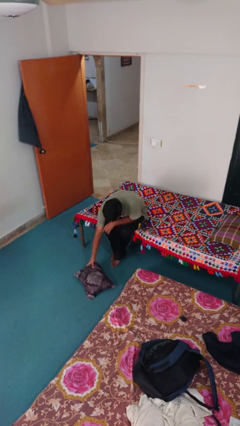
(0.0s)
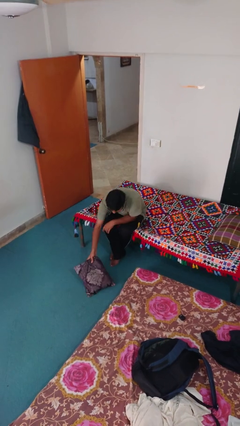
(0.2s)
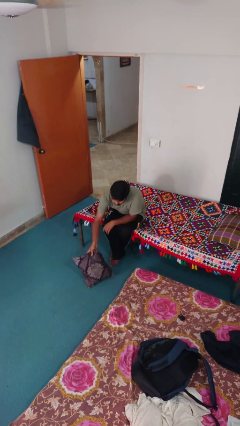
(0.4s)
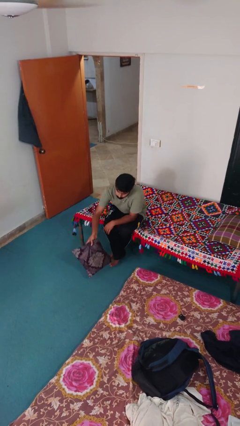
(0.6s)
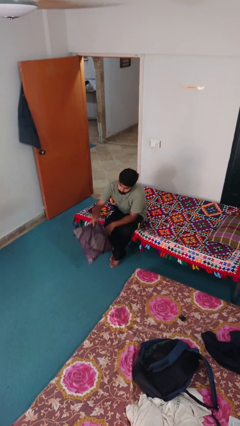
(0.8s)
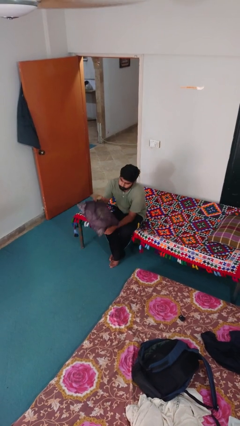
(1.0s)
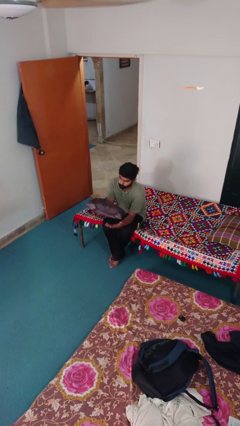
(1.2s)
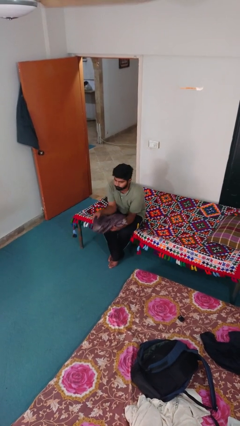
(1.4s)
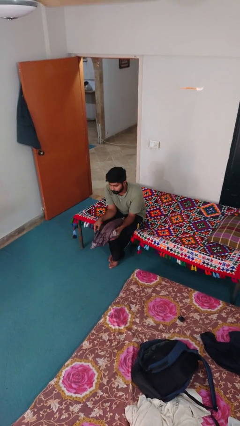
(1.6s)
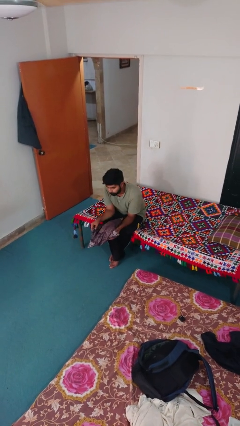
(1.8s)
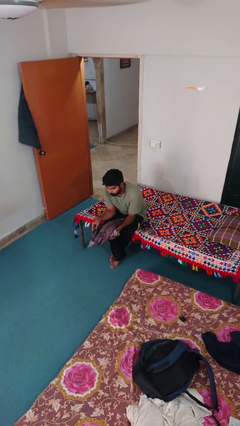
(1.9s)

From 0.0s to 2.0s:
person picks up object from floor

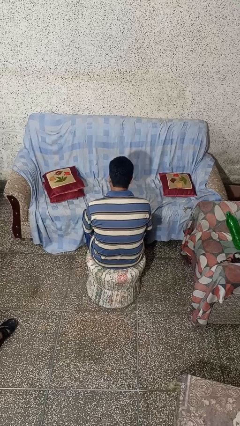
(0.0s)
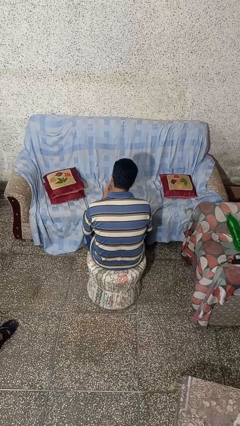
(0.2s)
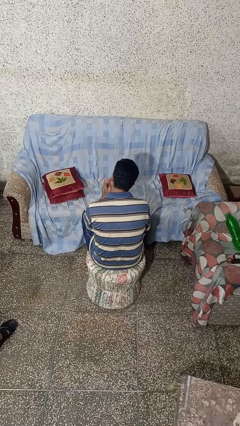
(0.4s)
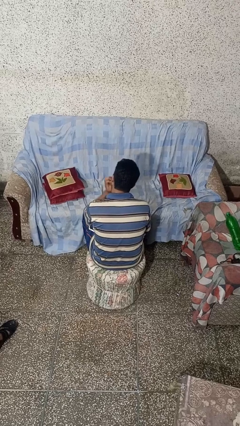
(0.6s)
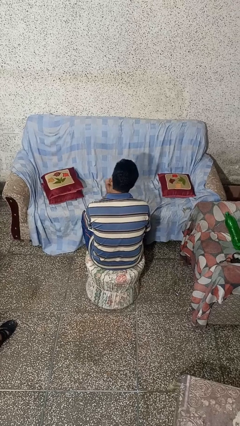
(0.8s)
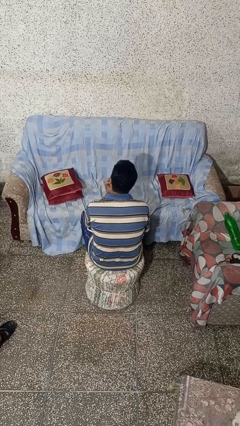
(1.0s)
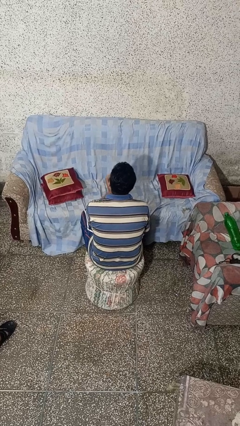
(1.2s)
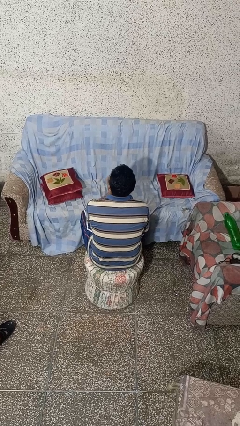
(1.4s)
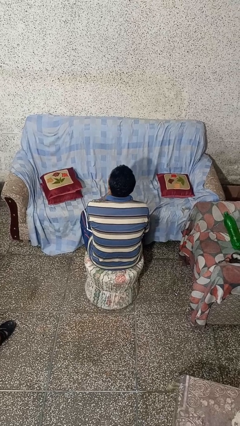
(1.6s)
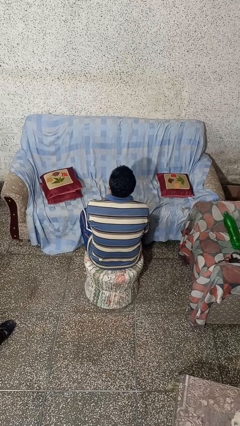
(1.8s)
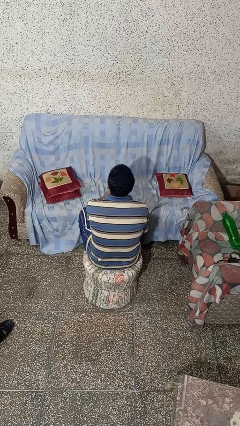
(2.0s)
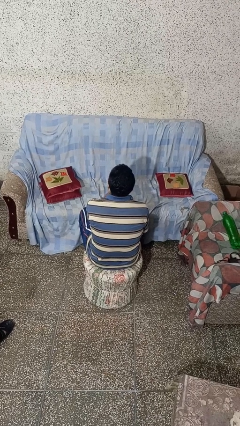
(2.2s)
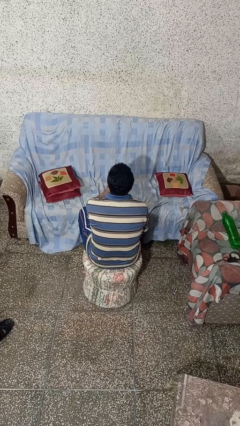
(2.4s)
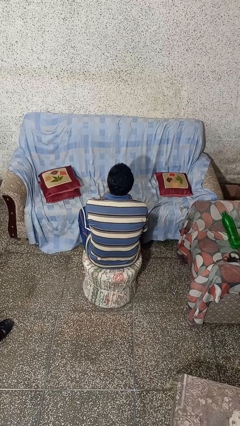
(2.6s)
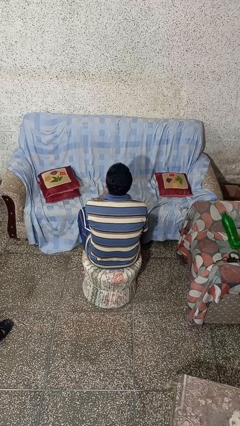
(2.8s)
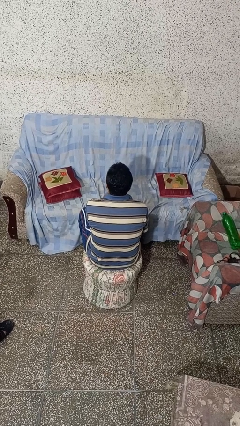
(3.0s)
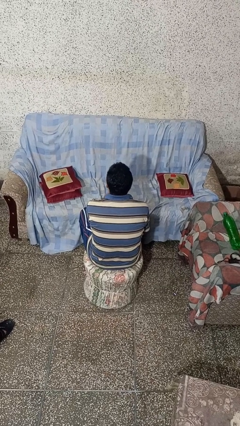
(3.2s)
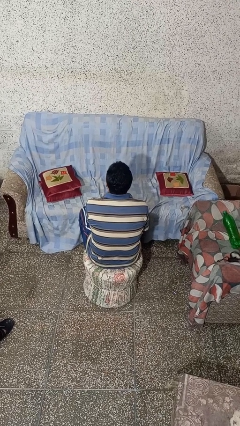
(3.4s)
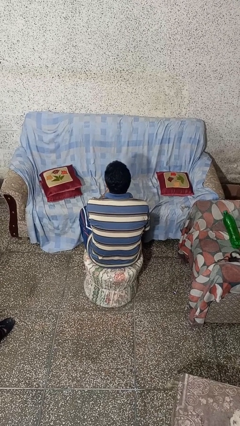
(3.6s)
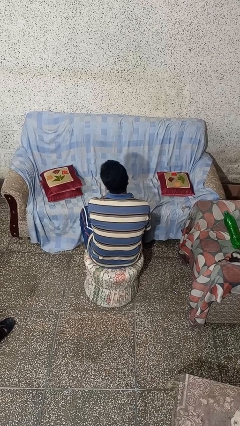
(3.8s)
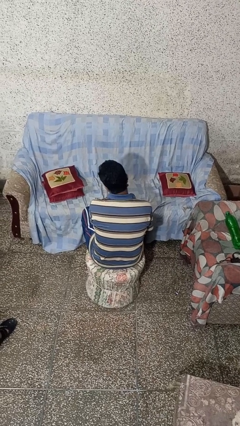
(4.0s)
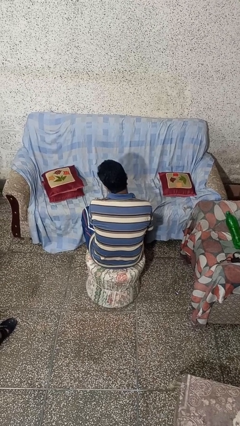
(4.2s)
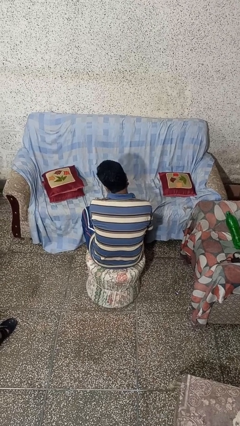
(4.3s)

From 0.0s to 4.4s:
person strokes chin

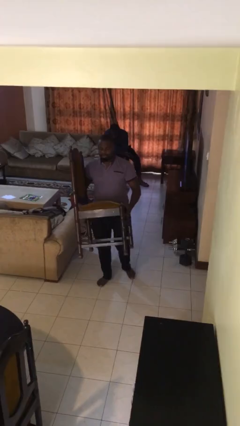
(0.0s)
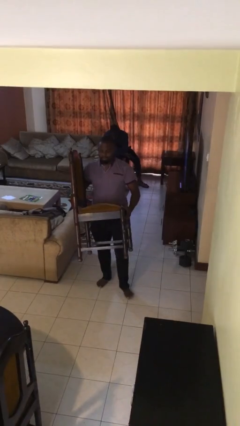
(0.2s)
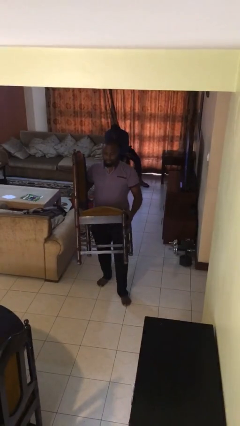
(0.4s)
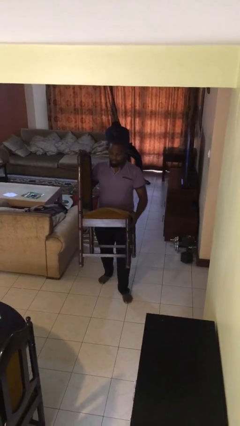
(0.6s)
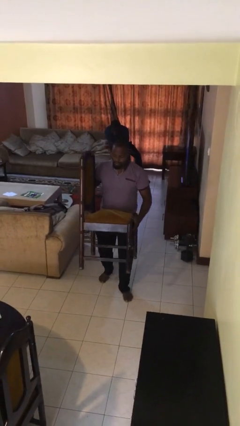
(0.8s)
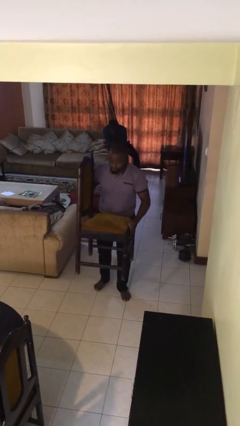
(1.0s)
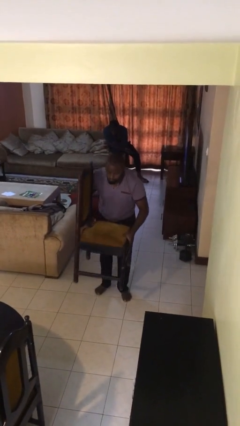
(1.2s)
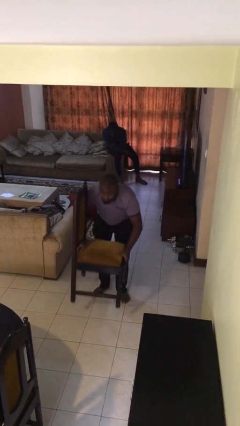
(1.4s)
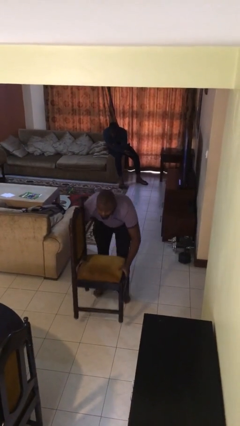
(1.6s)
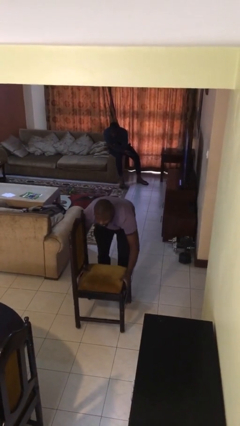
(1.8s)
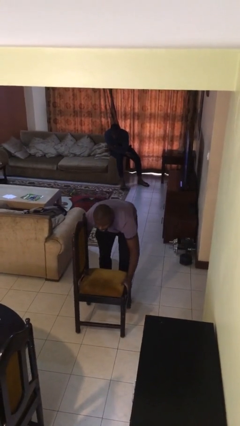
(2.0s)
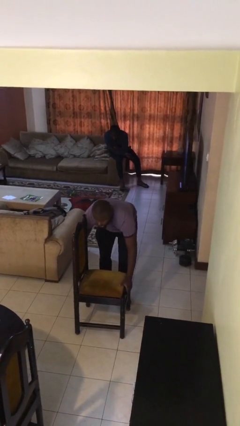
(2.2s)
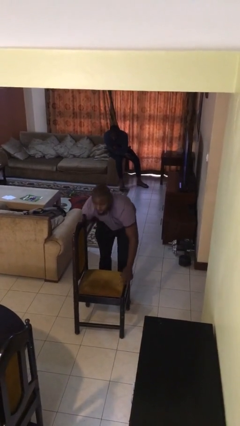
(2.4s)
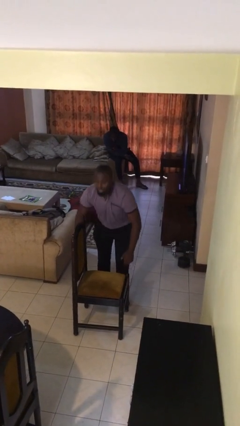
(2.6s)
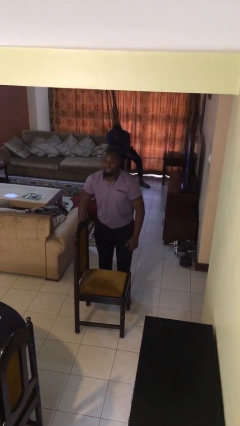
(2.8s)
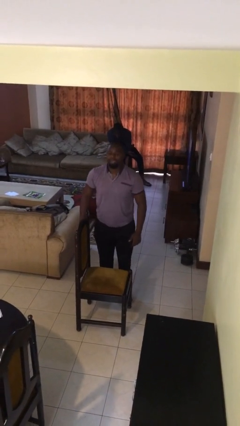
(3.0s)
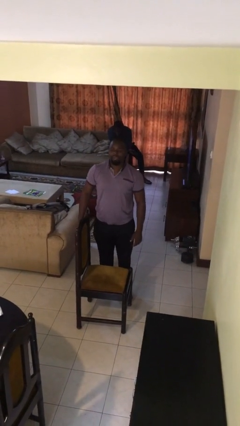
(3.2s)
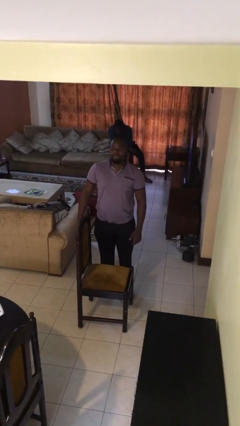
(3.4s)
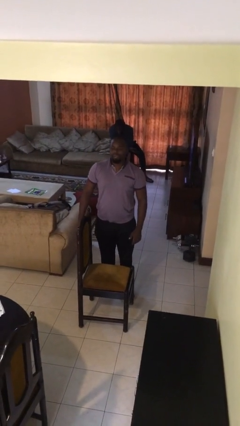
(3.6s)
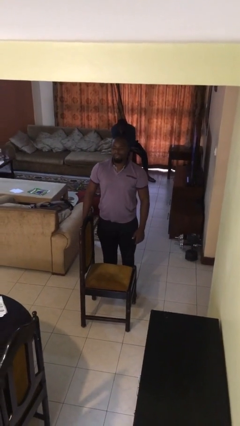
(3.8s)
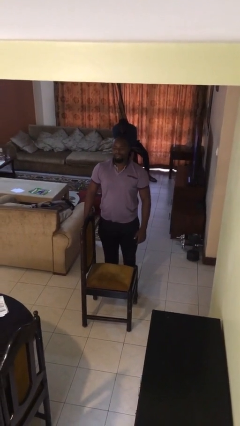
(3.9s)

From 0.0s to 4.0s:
person puts down object on floor

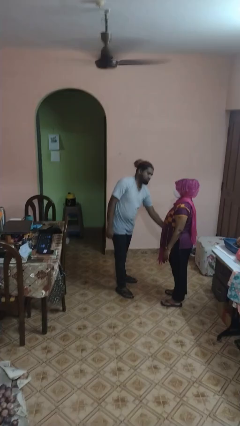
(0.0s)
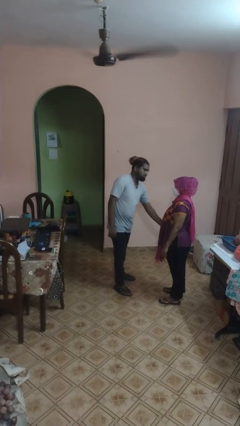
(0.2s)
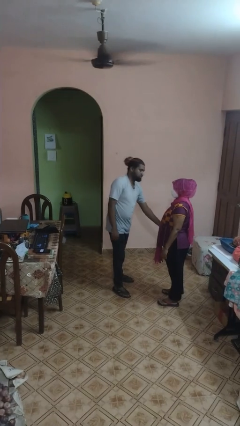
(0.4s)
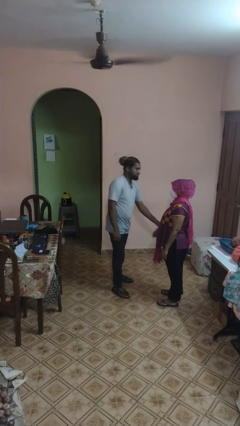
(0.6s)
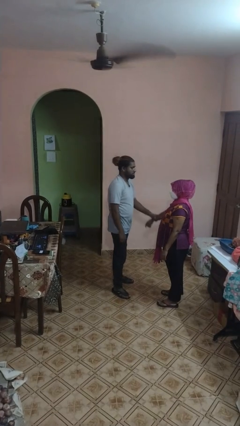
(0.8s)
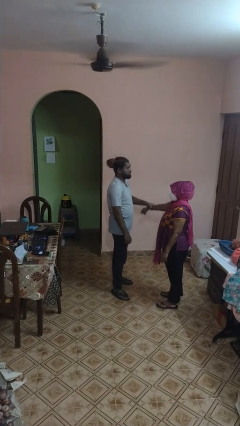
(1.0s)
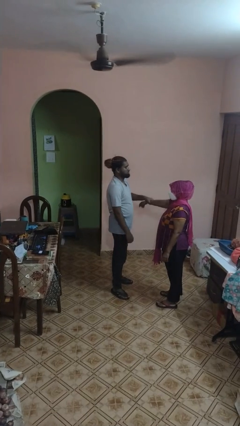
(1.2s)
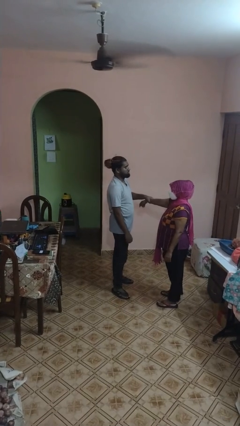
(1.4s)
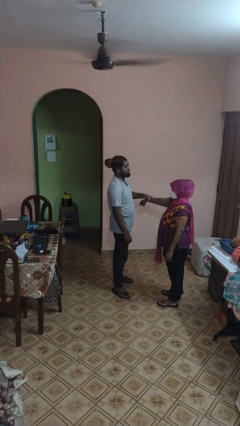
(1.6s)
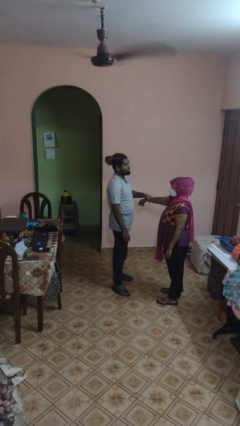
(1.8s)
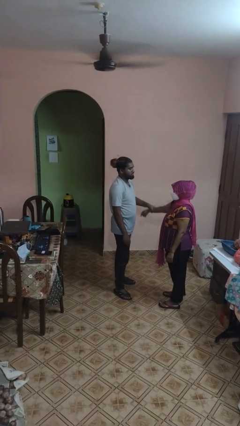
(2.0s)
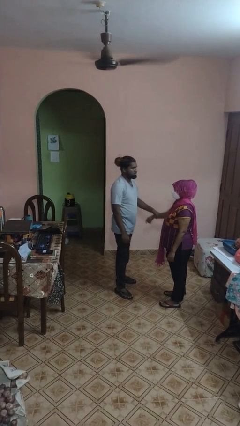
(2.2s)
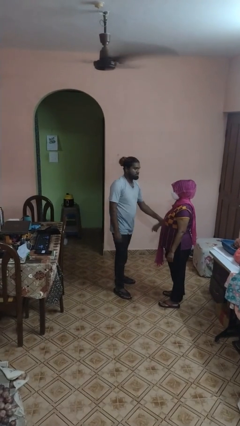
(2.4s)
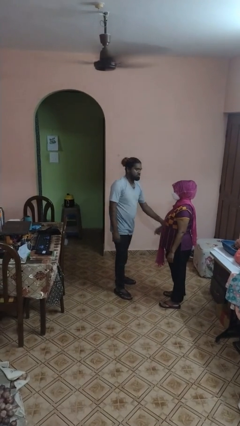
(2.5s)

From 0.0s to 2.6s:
person grabs person by forearm

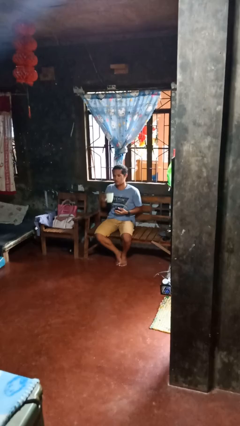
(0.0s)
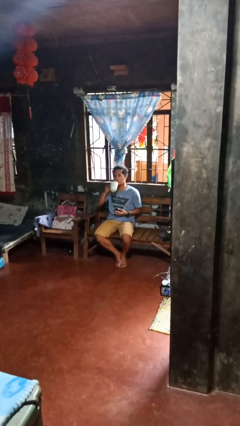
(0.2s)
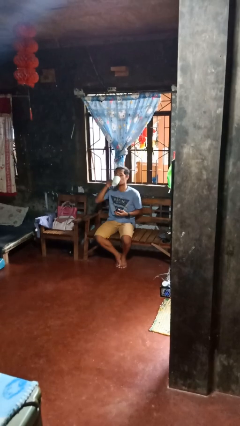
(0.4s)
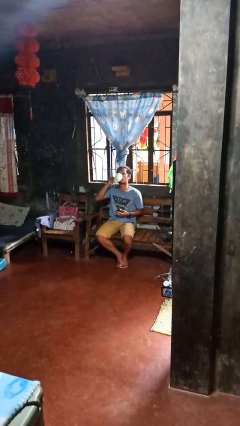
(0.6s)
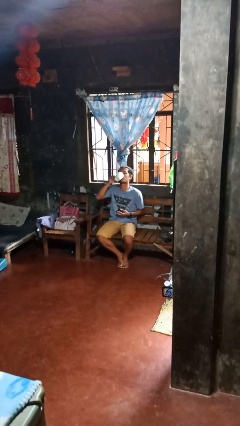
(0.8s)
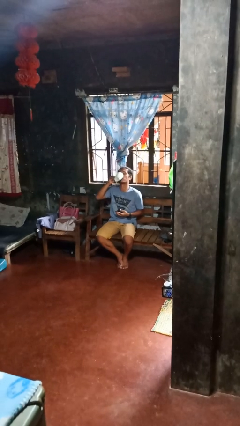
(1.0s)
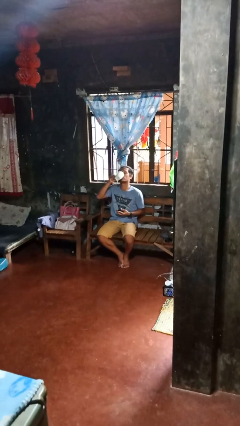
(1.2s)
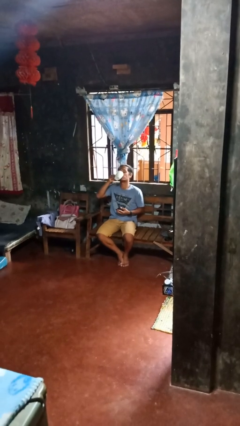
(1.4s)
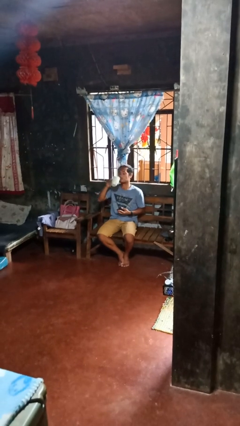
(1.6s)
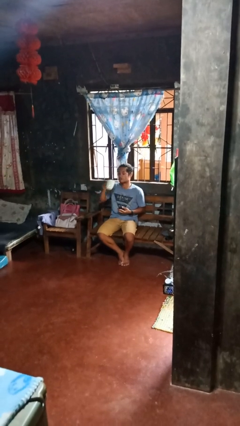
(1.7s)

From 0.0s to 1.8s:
person drinks from cup

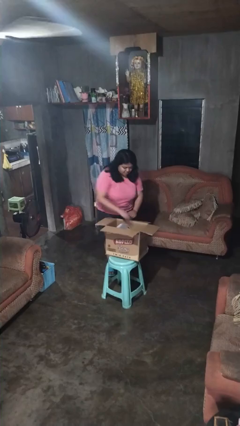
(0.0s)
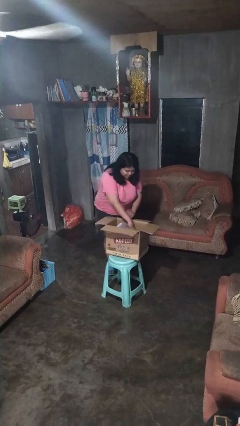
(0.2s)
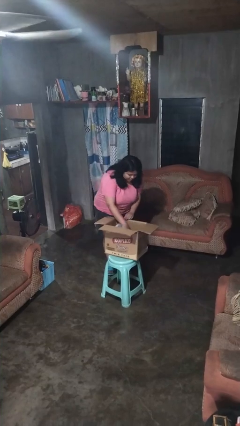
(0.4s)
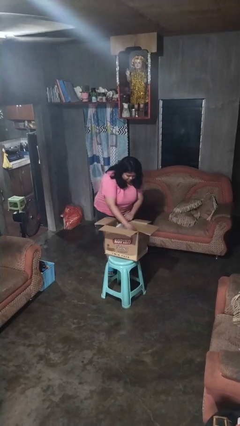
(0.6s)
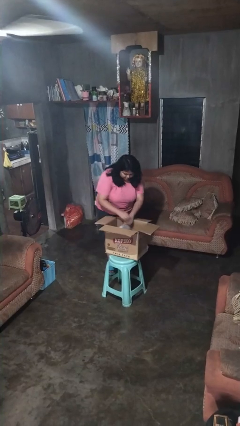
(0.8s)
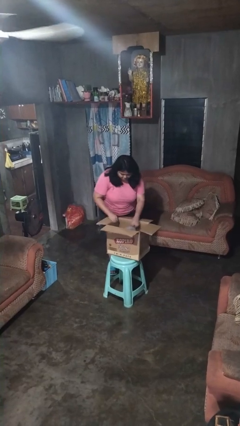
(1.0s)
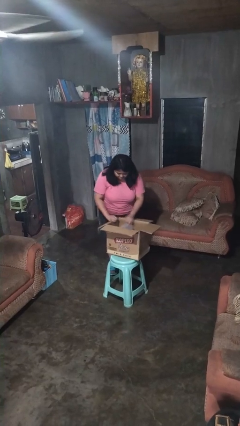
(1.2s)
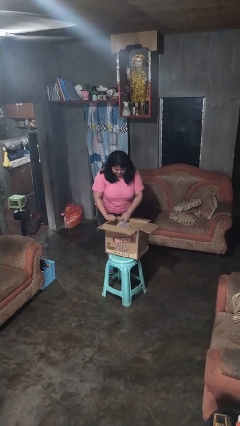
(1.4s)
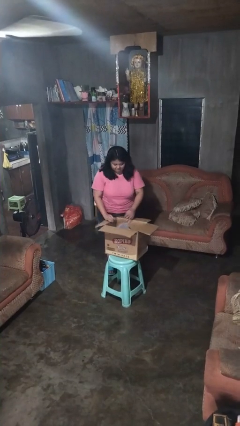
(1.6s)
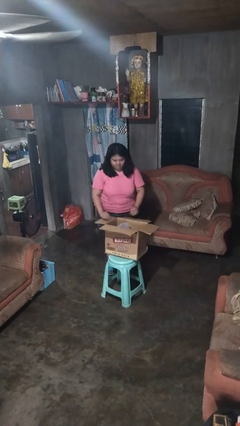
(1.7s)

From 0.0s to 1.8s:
person searches in box

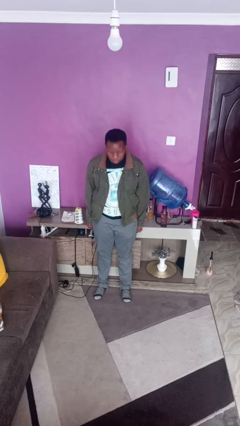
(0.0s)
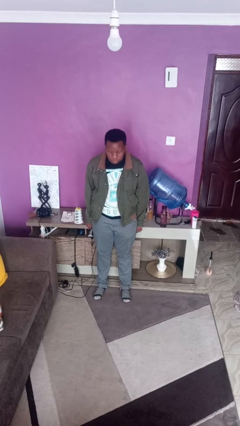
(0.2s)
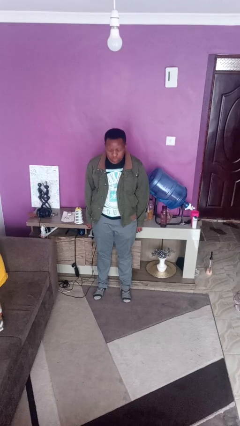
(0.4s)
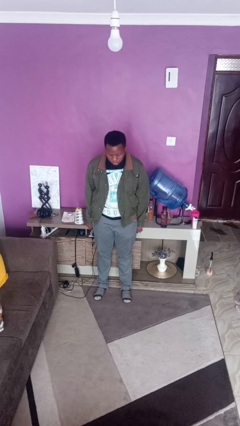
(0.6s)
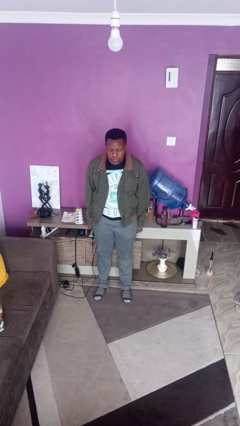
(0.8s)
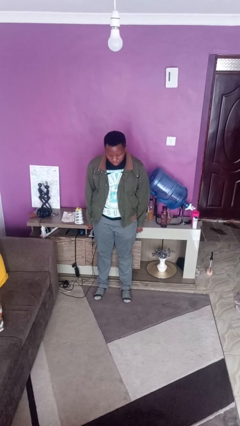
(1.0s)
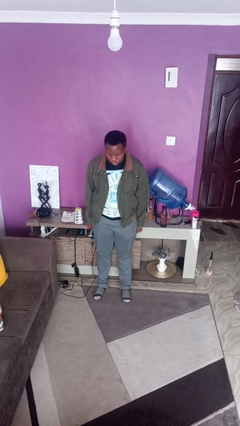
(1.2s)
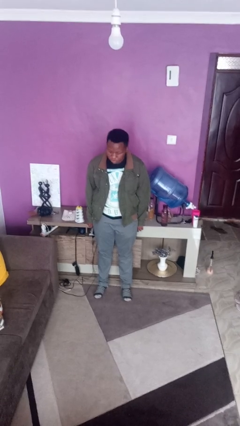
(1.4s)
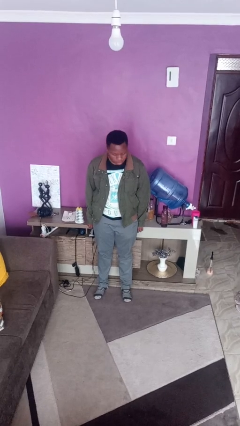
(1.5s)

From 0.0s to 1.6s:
person nods head
